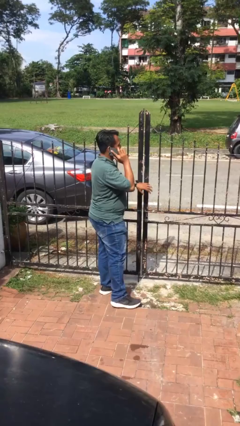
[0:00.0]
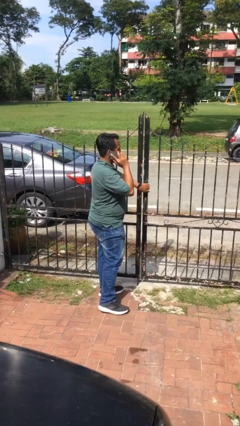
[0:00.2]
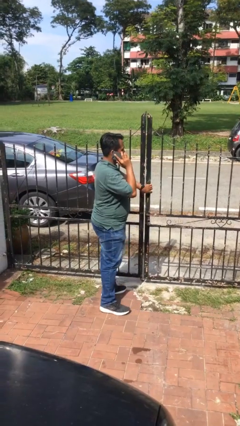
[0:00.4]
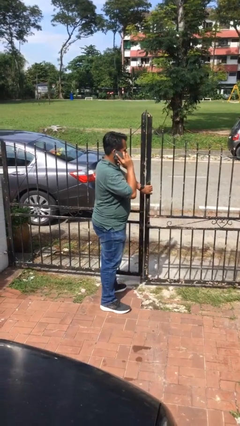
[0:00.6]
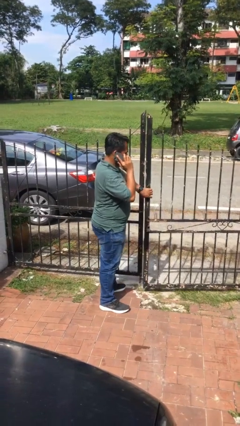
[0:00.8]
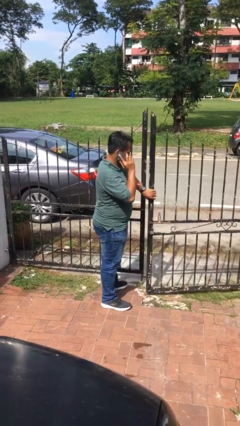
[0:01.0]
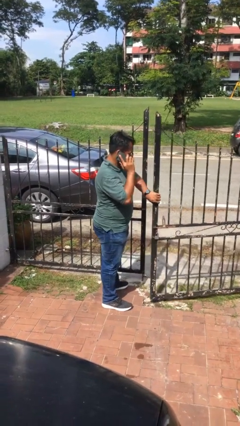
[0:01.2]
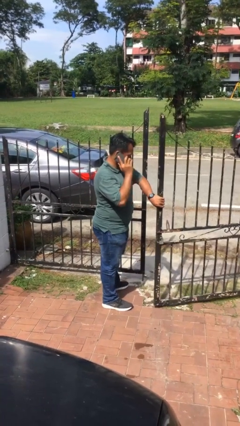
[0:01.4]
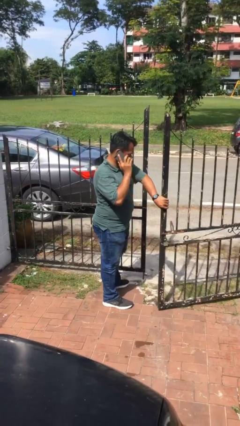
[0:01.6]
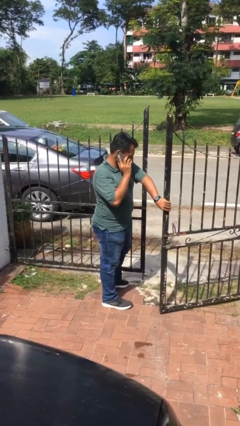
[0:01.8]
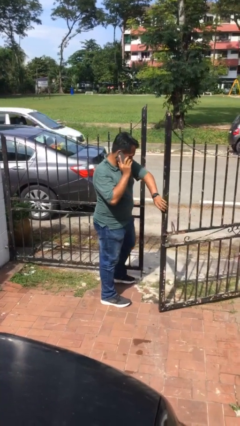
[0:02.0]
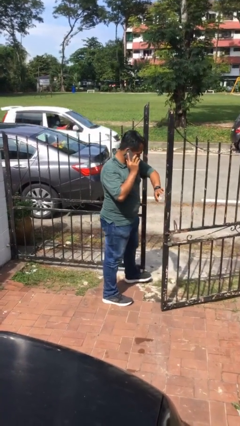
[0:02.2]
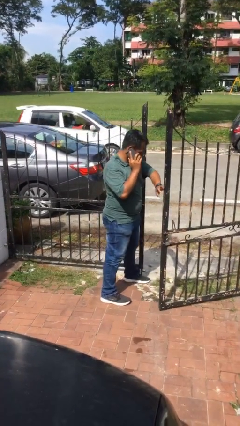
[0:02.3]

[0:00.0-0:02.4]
person opens facility door

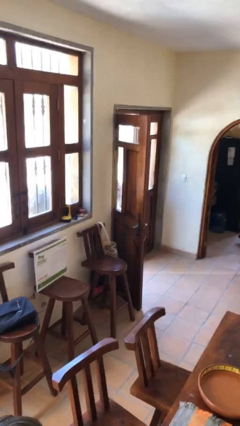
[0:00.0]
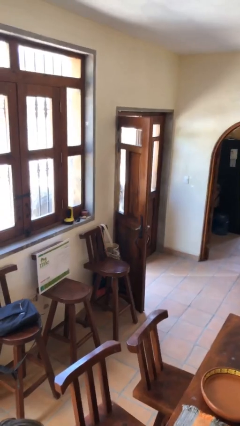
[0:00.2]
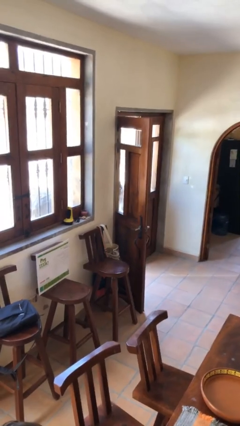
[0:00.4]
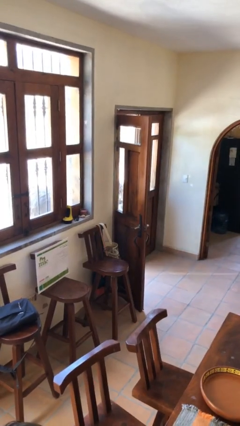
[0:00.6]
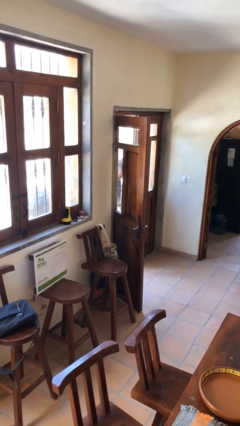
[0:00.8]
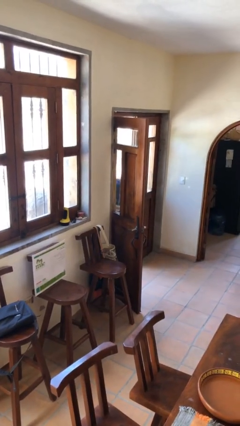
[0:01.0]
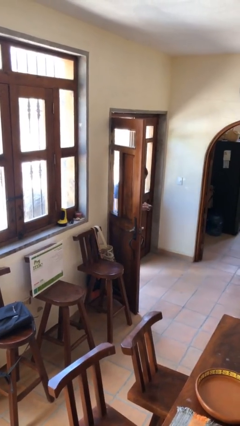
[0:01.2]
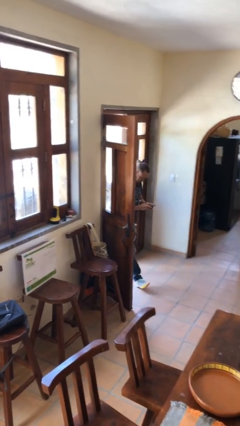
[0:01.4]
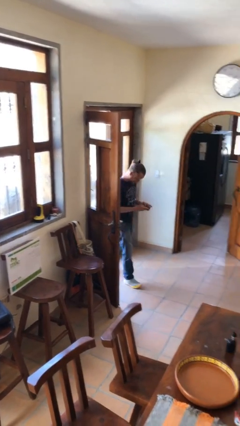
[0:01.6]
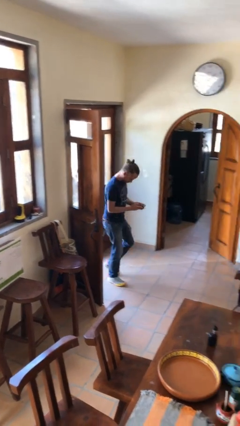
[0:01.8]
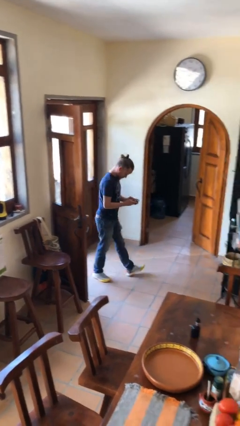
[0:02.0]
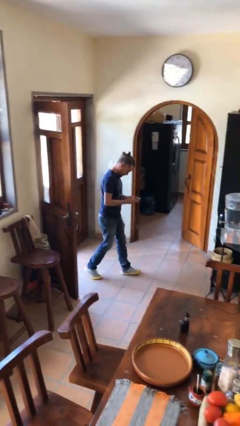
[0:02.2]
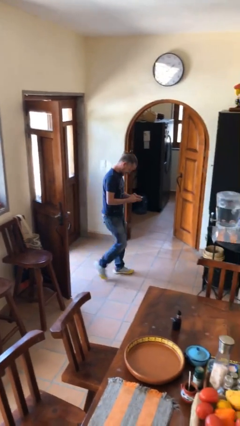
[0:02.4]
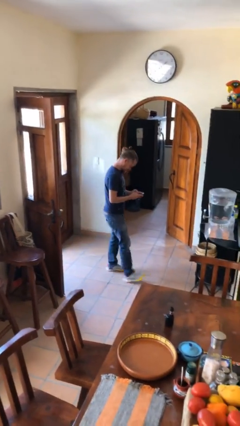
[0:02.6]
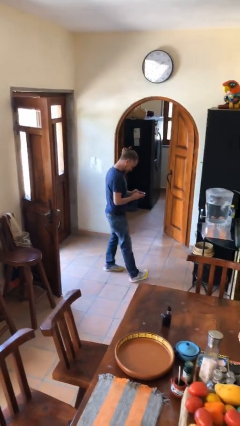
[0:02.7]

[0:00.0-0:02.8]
person enters scene through structure

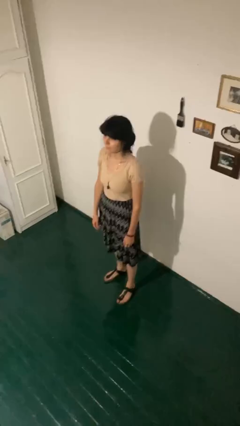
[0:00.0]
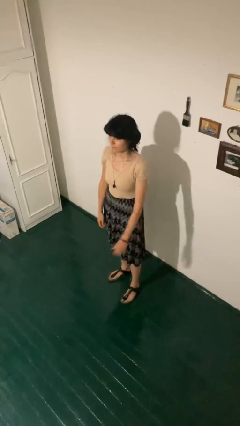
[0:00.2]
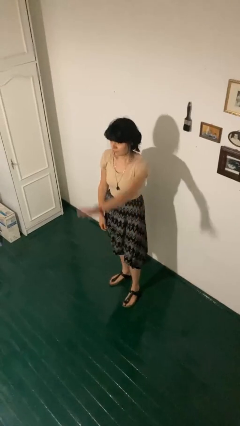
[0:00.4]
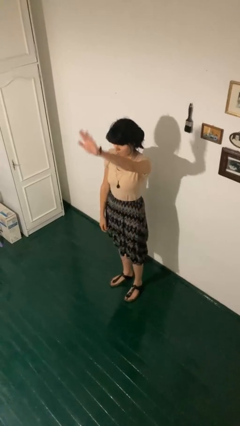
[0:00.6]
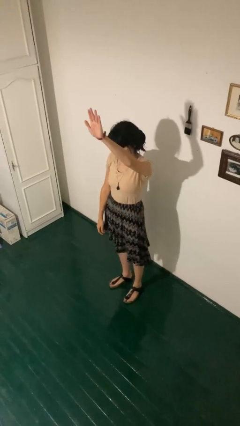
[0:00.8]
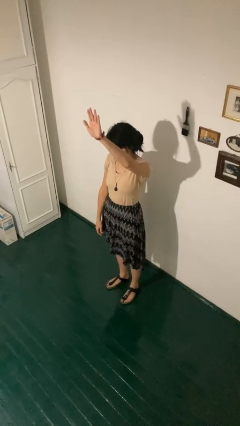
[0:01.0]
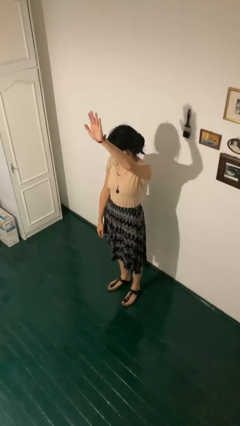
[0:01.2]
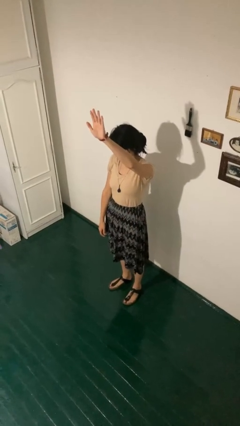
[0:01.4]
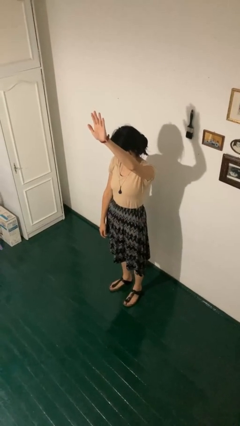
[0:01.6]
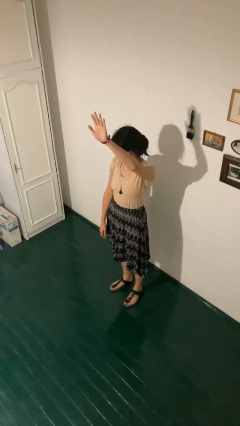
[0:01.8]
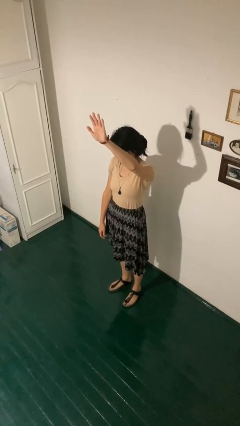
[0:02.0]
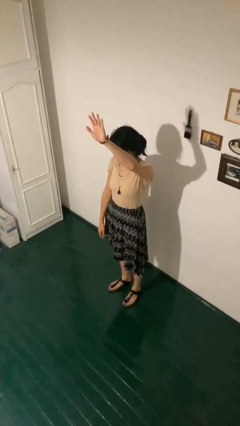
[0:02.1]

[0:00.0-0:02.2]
person gestures raise hand

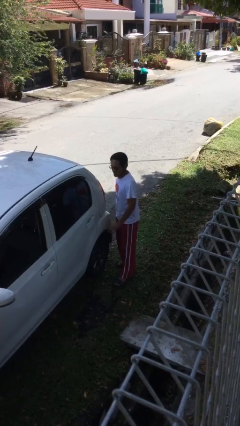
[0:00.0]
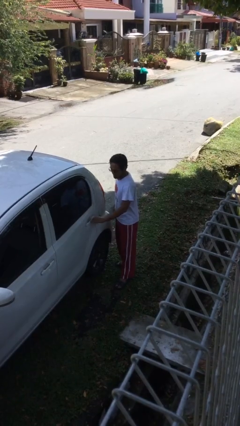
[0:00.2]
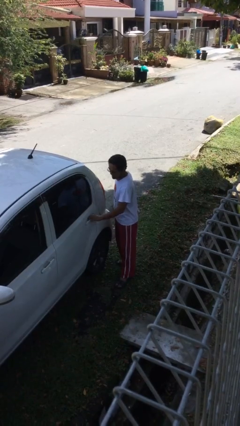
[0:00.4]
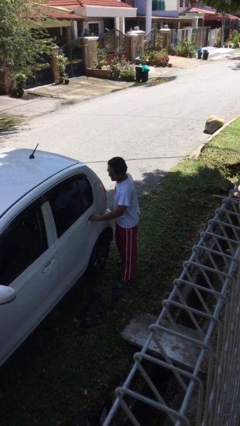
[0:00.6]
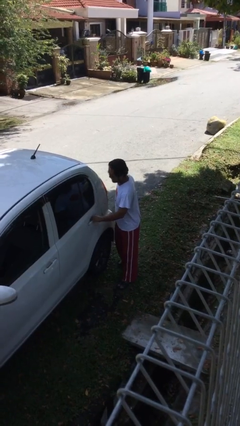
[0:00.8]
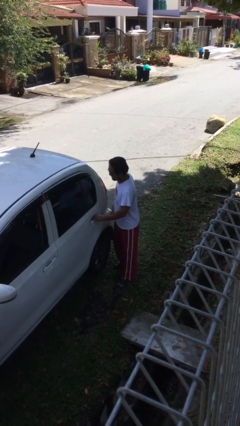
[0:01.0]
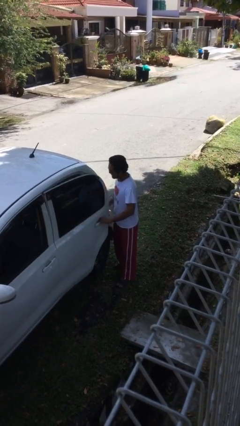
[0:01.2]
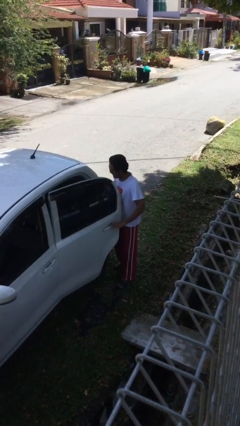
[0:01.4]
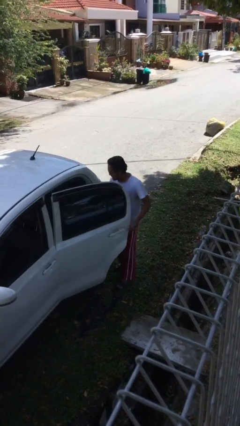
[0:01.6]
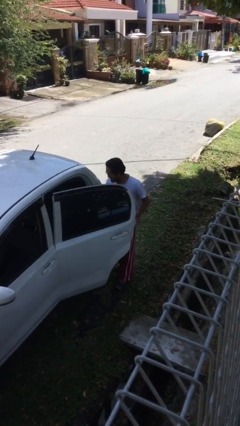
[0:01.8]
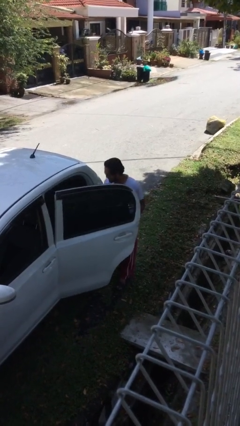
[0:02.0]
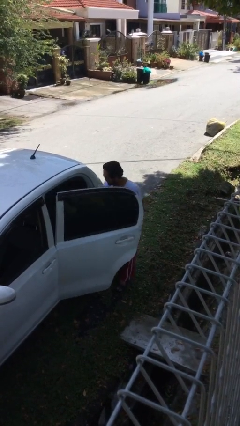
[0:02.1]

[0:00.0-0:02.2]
person opens car door

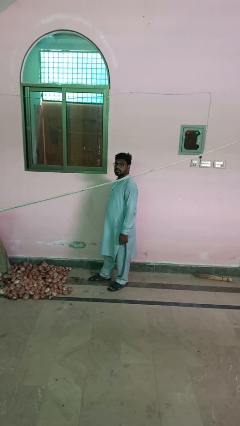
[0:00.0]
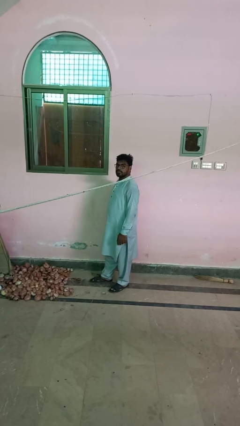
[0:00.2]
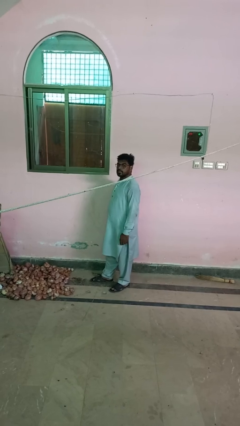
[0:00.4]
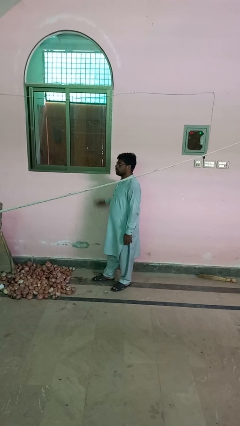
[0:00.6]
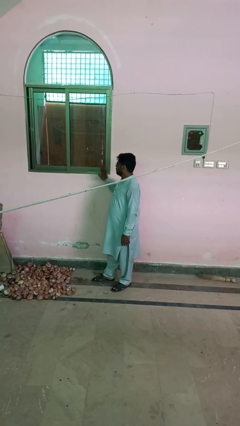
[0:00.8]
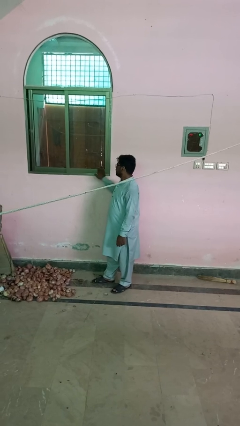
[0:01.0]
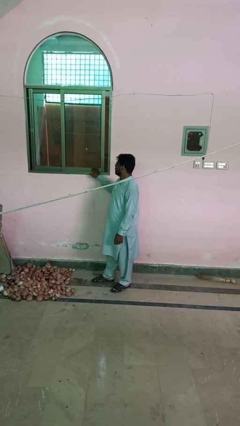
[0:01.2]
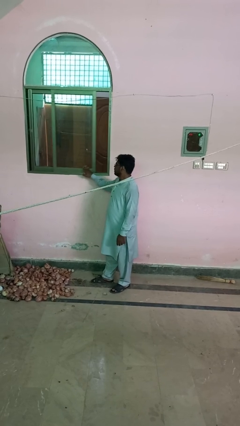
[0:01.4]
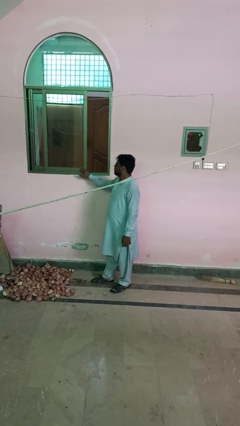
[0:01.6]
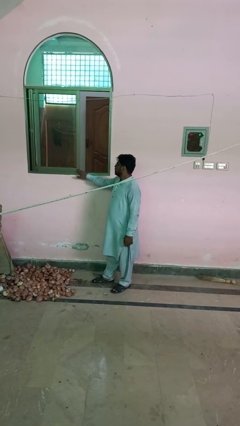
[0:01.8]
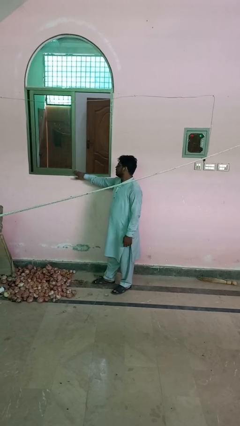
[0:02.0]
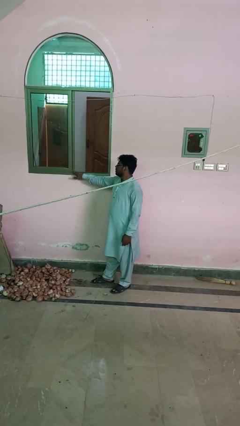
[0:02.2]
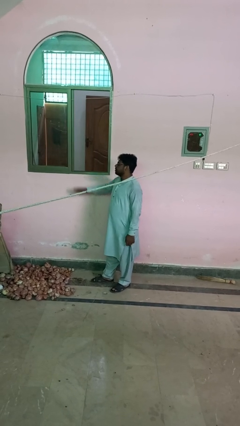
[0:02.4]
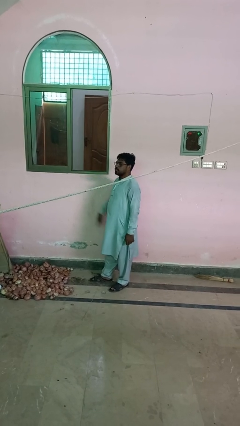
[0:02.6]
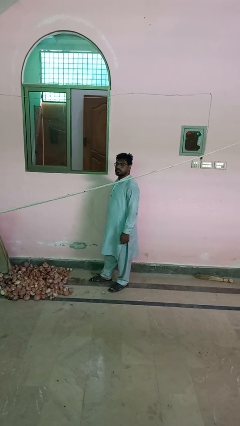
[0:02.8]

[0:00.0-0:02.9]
person opens sliding door

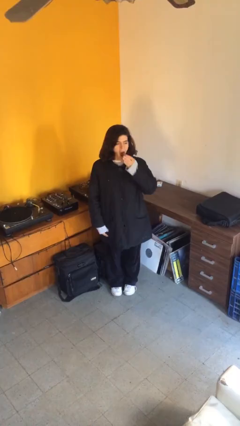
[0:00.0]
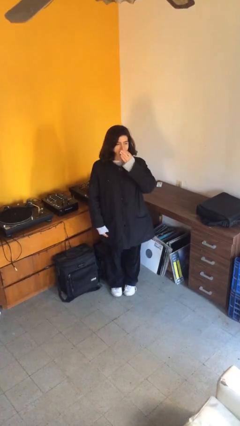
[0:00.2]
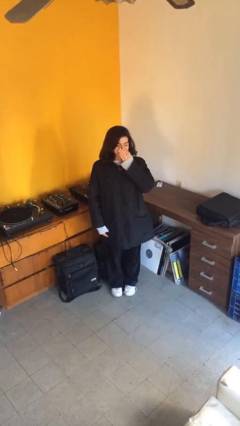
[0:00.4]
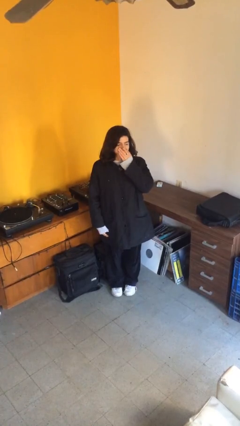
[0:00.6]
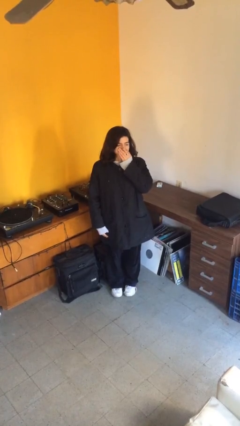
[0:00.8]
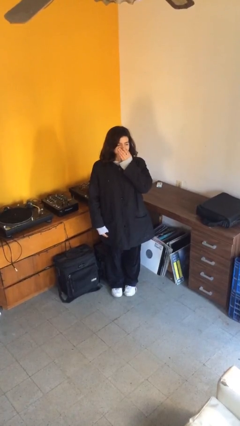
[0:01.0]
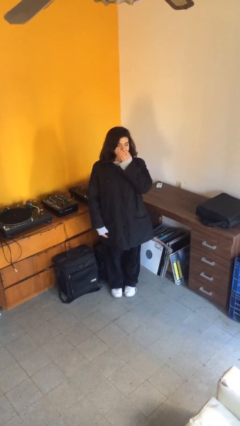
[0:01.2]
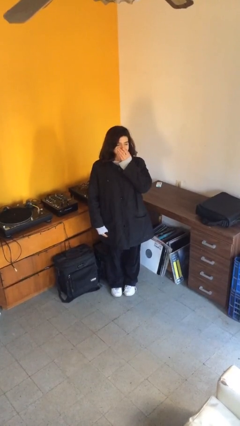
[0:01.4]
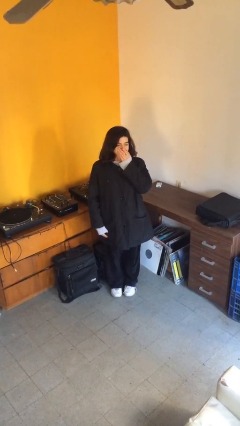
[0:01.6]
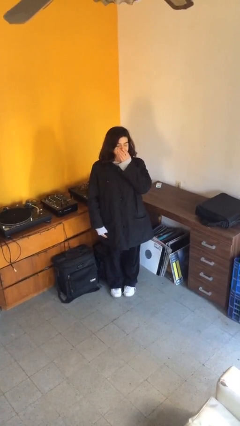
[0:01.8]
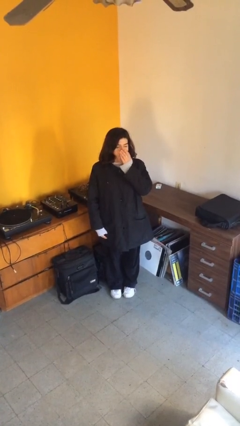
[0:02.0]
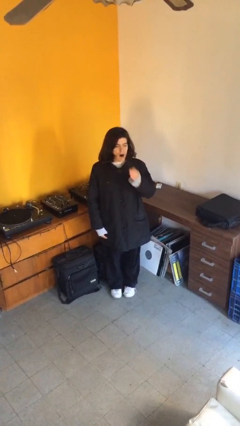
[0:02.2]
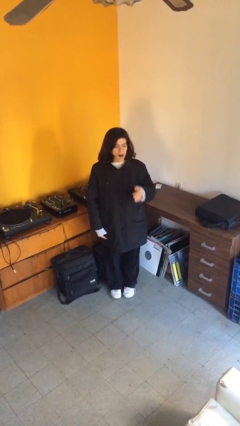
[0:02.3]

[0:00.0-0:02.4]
person yawns

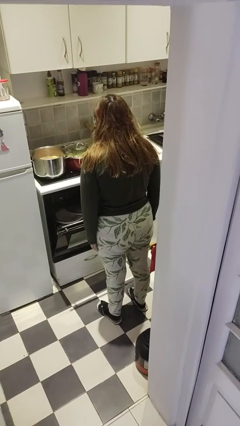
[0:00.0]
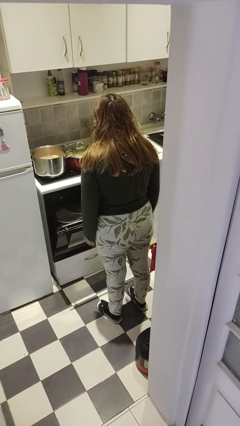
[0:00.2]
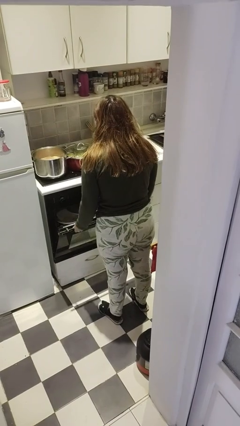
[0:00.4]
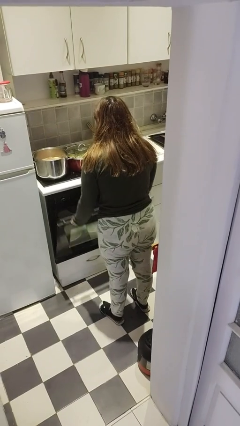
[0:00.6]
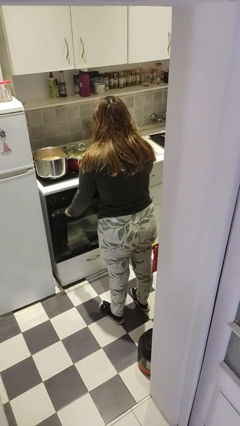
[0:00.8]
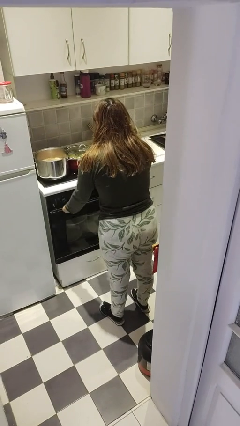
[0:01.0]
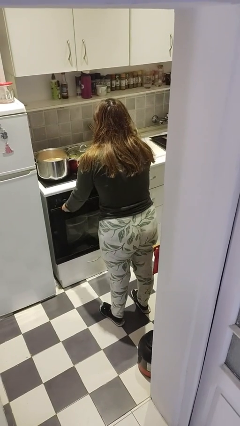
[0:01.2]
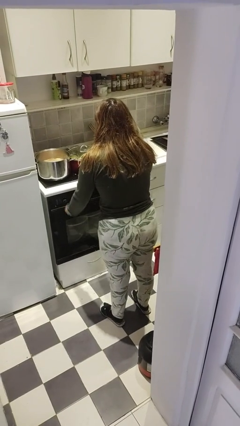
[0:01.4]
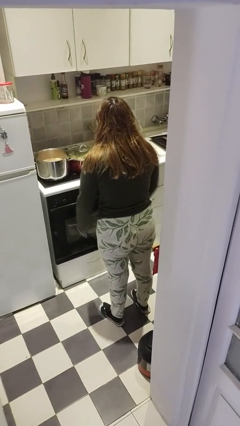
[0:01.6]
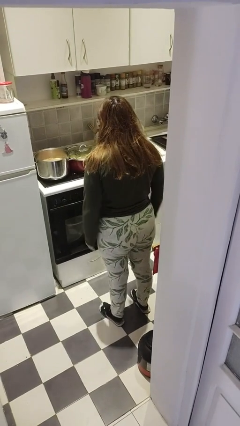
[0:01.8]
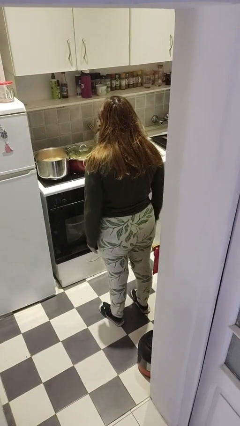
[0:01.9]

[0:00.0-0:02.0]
person closes dishwasher

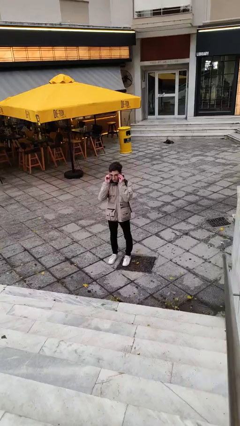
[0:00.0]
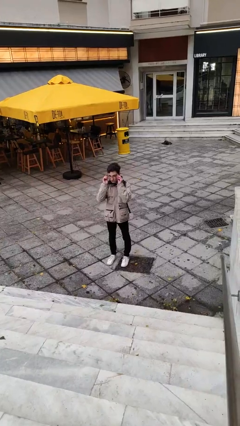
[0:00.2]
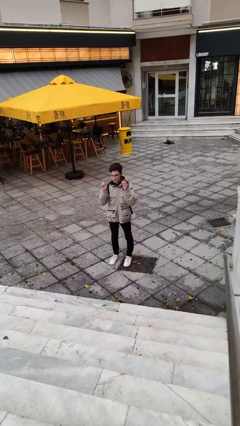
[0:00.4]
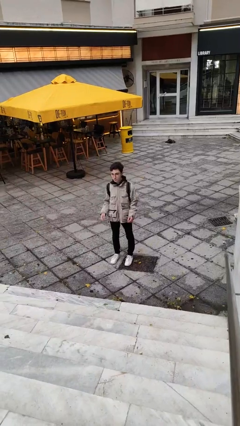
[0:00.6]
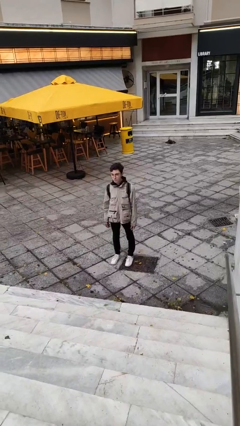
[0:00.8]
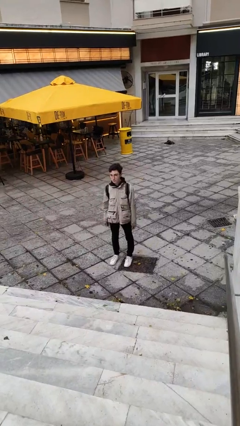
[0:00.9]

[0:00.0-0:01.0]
person puts on glasses
